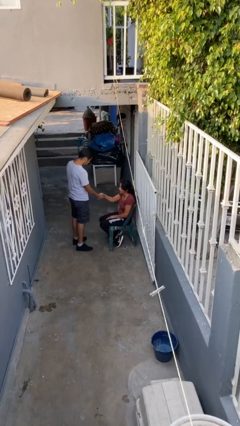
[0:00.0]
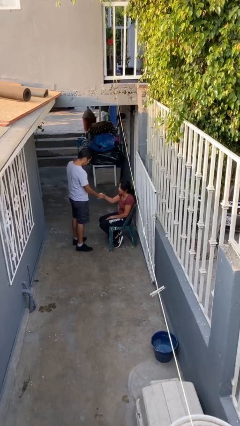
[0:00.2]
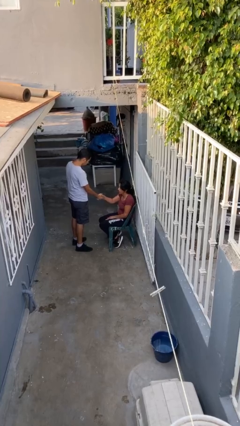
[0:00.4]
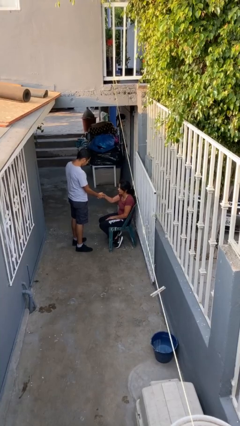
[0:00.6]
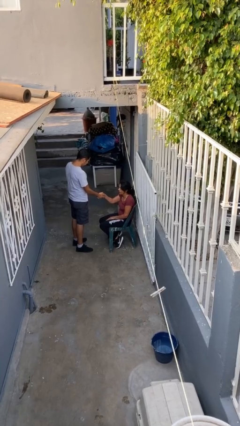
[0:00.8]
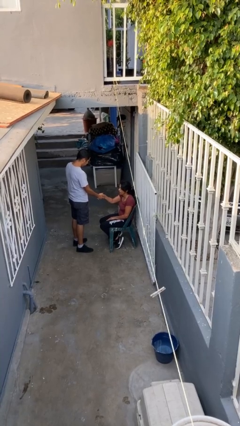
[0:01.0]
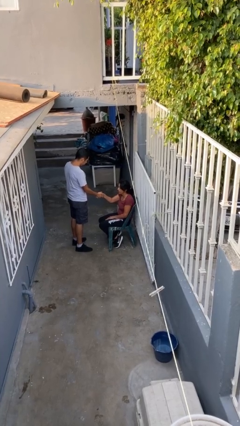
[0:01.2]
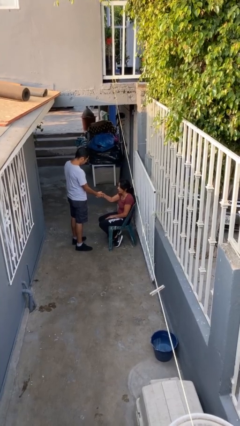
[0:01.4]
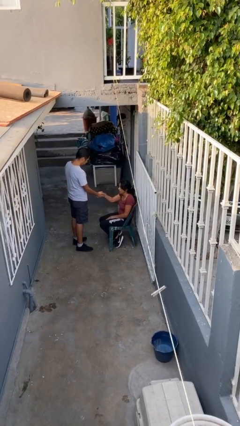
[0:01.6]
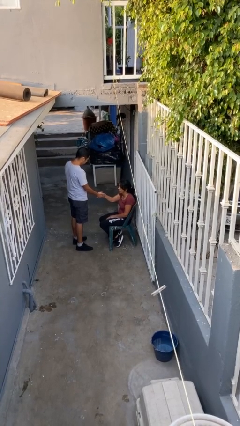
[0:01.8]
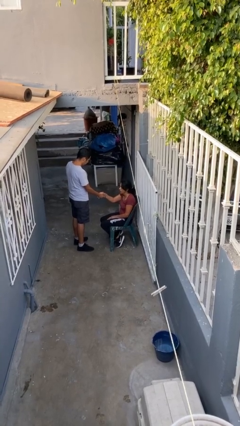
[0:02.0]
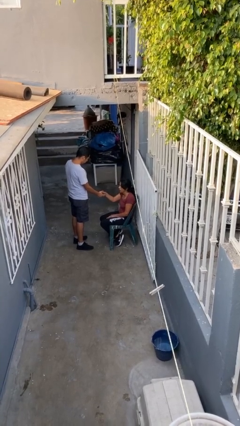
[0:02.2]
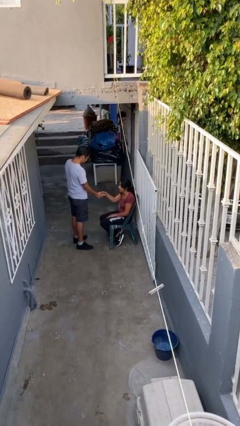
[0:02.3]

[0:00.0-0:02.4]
person shakes hand

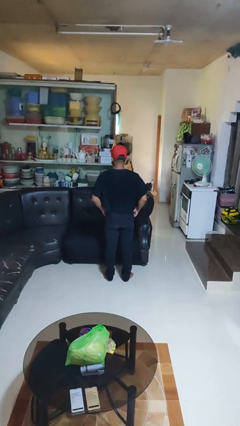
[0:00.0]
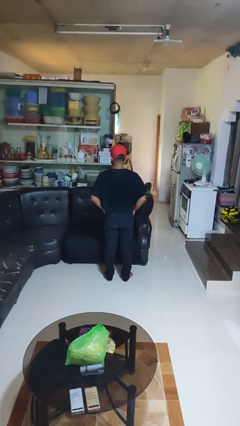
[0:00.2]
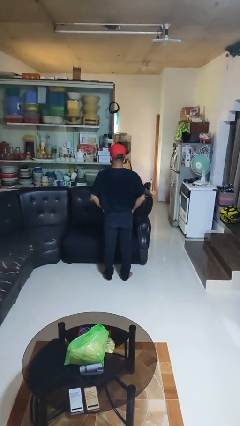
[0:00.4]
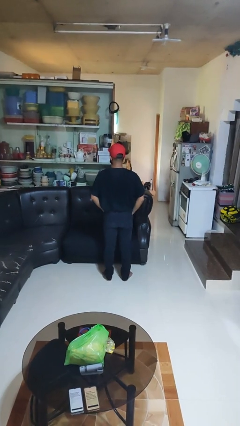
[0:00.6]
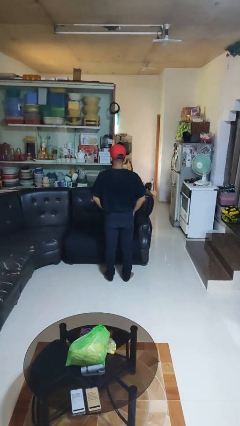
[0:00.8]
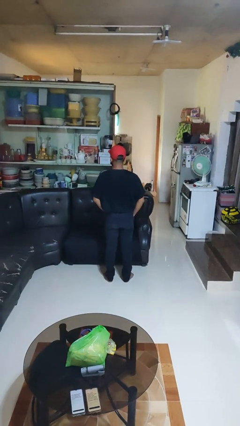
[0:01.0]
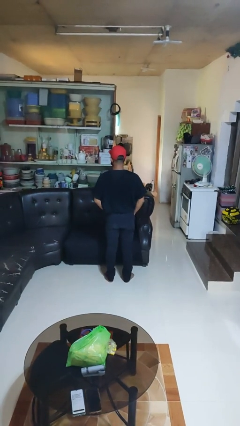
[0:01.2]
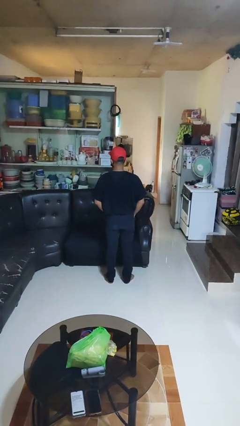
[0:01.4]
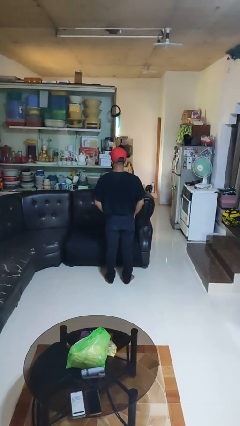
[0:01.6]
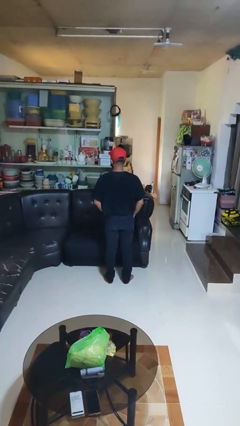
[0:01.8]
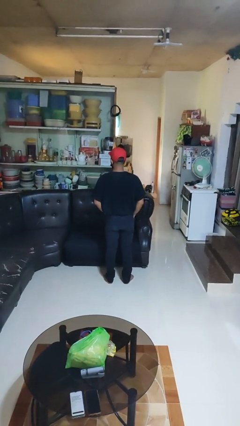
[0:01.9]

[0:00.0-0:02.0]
person puts hands in back pockets

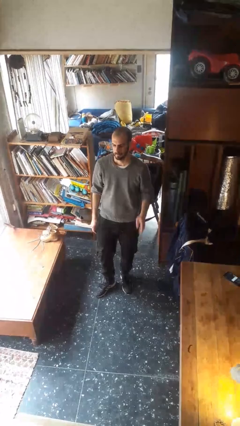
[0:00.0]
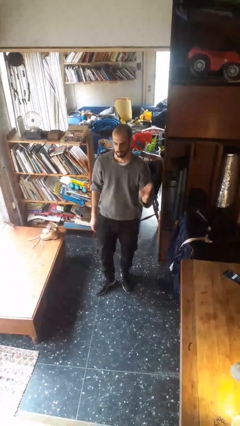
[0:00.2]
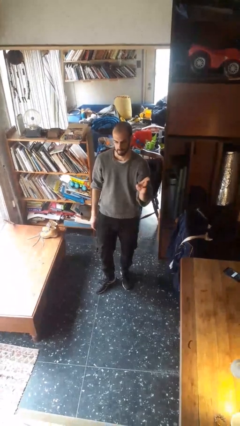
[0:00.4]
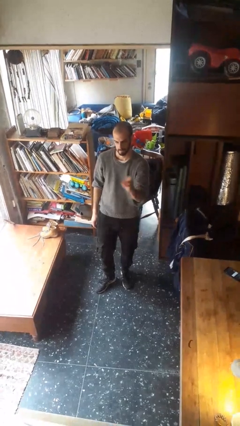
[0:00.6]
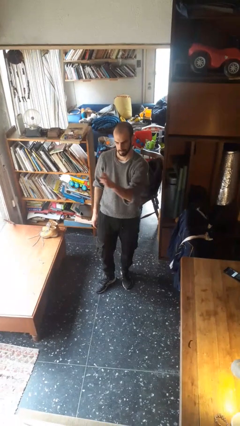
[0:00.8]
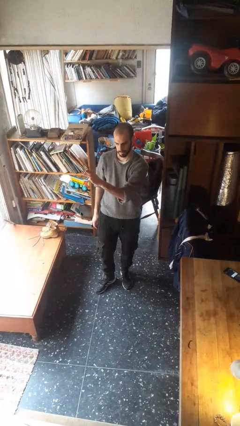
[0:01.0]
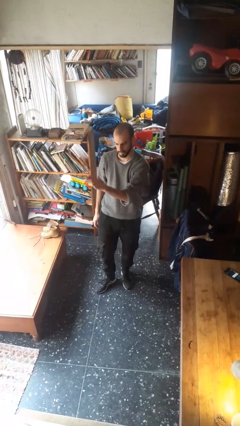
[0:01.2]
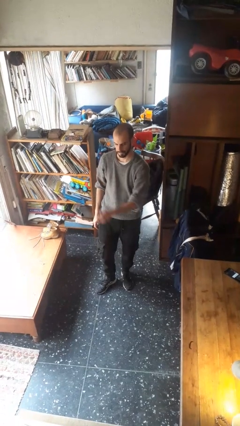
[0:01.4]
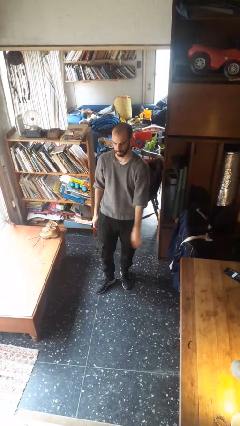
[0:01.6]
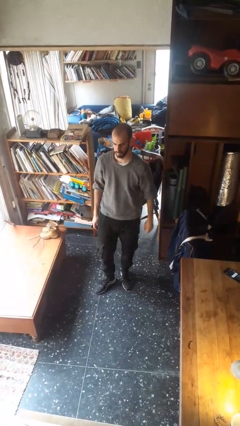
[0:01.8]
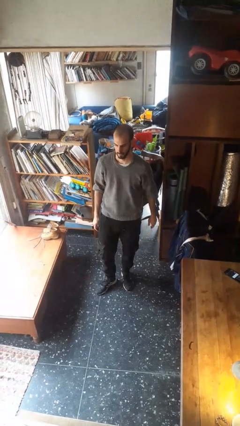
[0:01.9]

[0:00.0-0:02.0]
person gestures swipe right

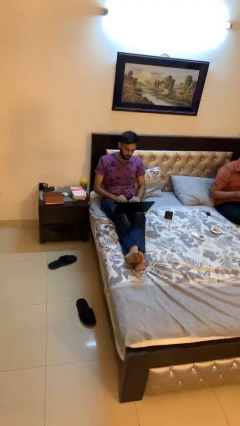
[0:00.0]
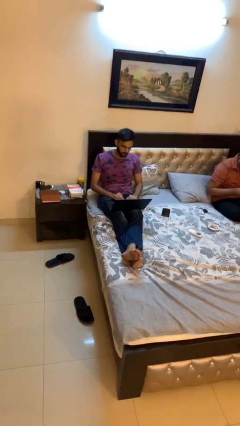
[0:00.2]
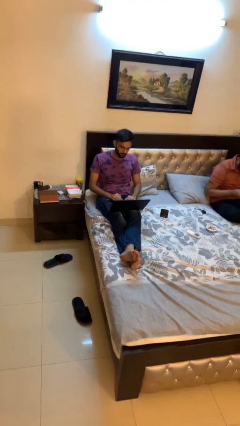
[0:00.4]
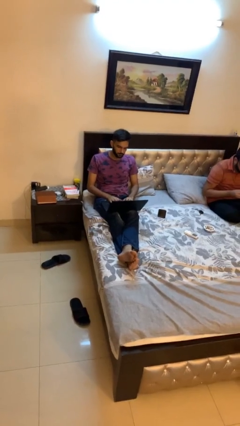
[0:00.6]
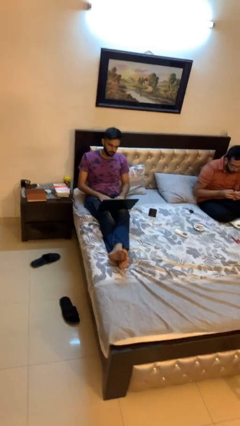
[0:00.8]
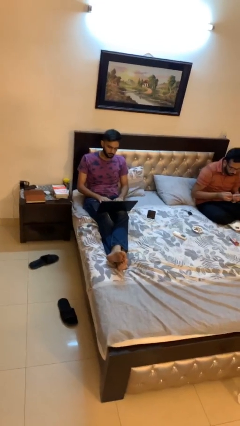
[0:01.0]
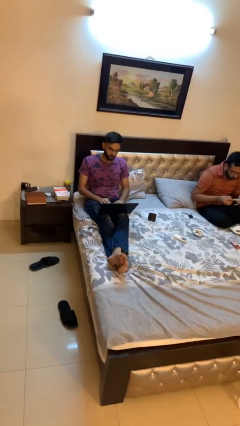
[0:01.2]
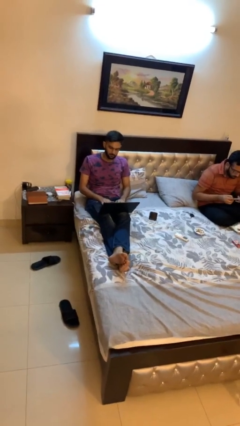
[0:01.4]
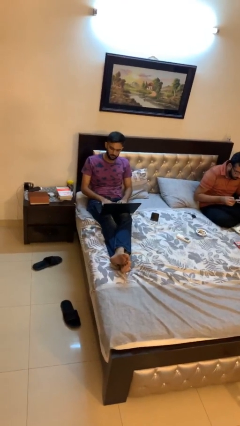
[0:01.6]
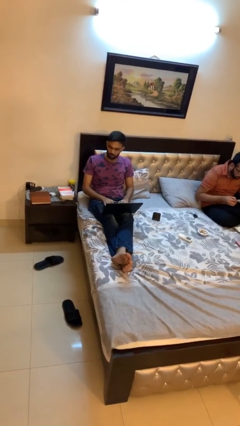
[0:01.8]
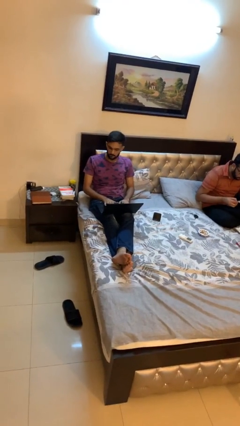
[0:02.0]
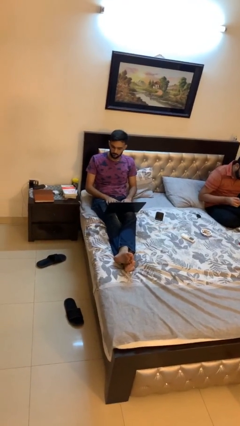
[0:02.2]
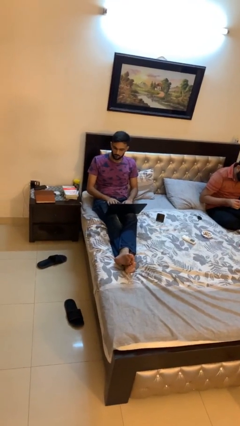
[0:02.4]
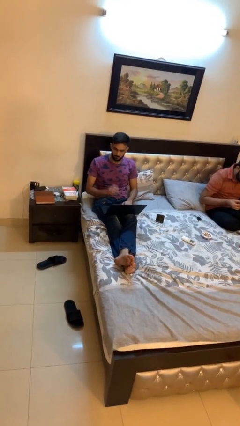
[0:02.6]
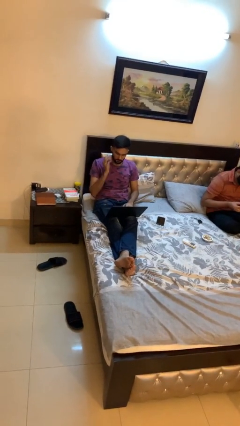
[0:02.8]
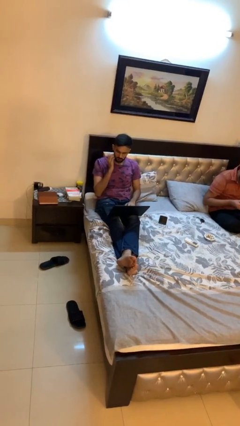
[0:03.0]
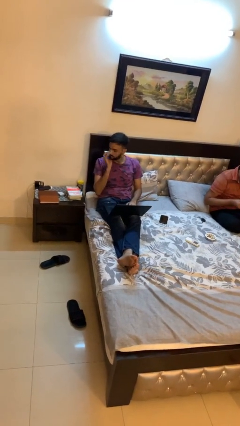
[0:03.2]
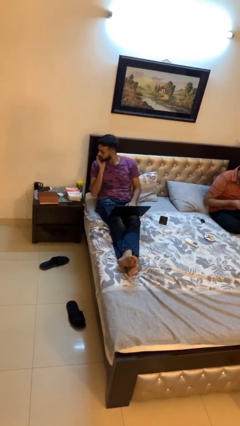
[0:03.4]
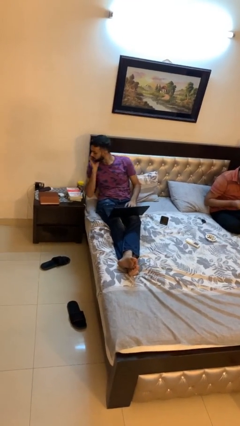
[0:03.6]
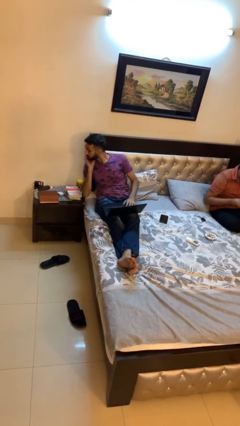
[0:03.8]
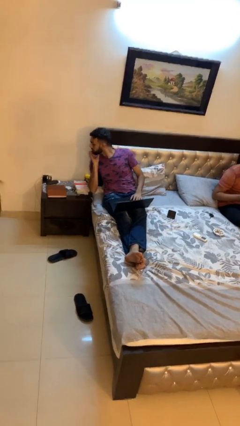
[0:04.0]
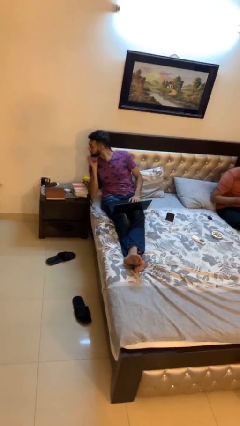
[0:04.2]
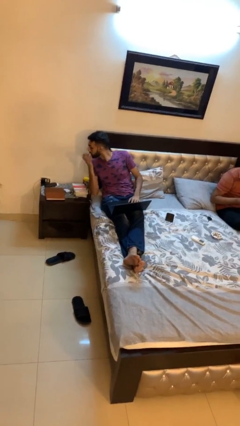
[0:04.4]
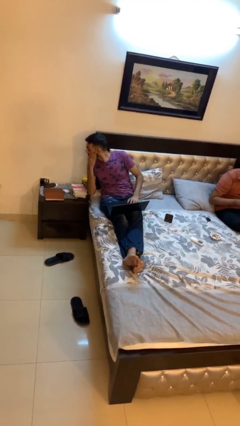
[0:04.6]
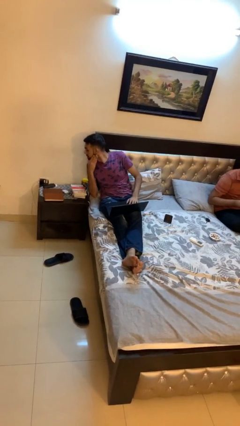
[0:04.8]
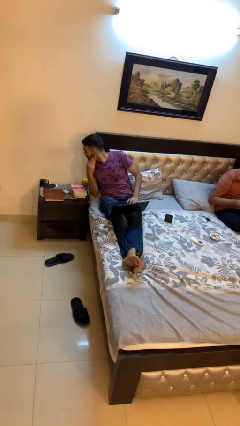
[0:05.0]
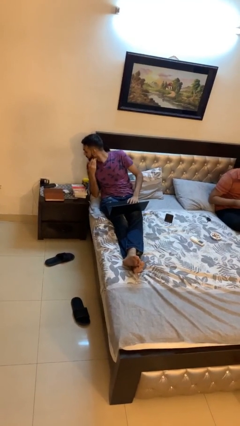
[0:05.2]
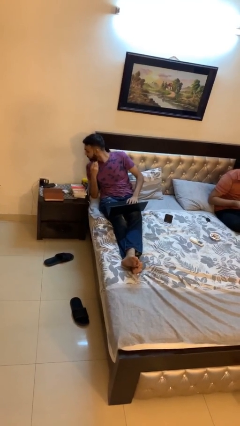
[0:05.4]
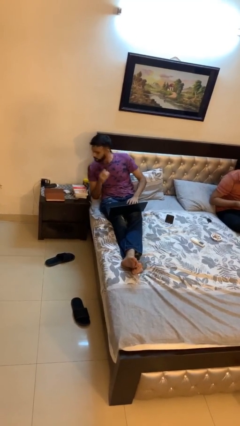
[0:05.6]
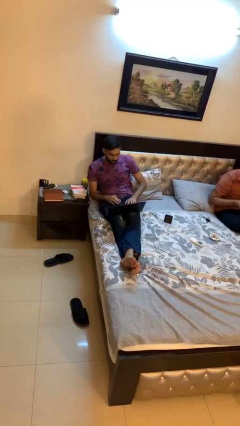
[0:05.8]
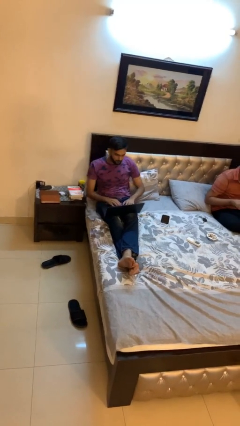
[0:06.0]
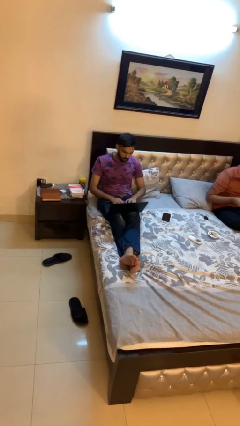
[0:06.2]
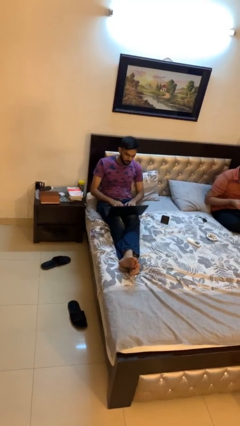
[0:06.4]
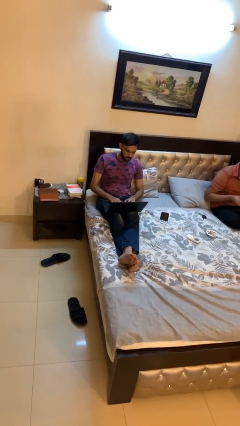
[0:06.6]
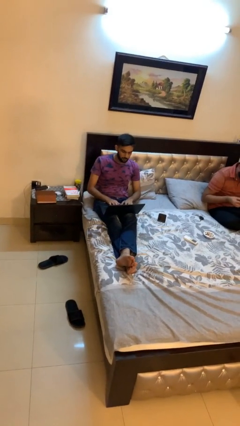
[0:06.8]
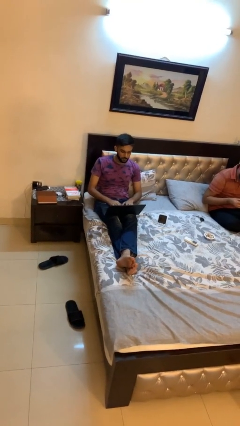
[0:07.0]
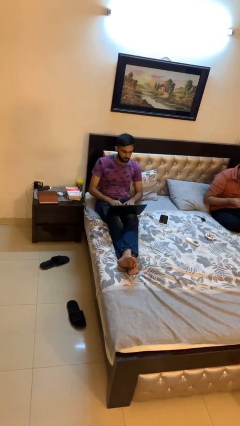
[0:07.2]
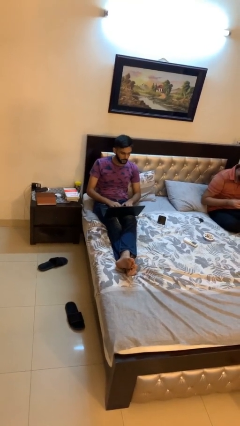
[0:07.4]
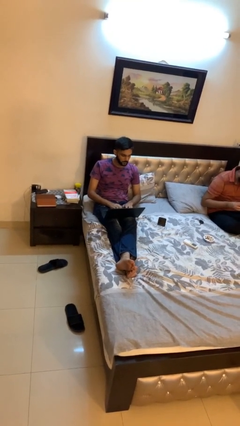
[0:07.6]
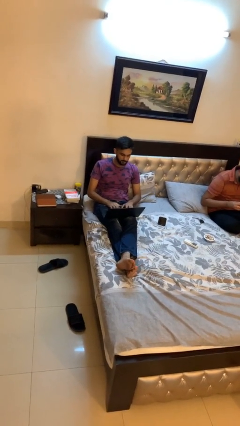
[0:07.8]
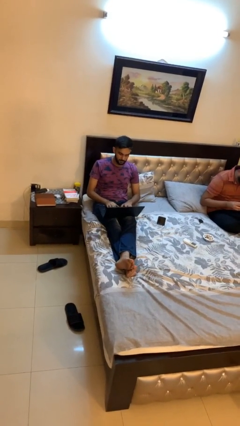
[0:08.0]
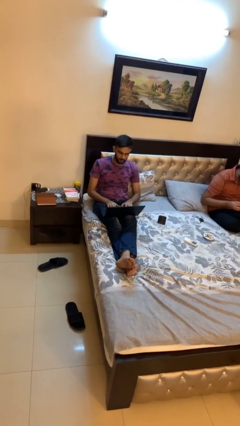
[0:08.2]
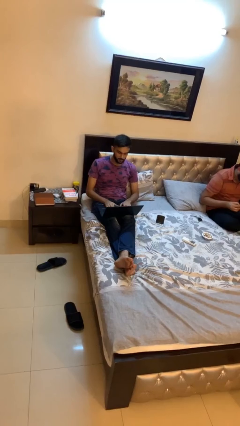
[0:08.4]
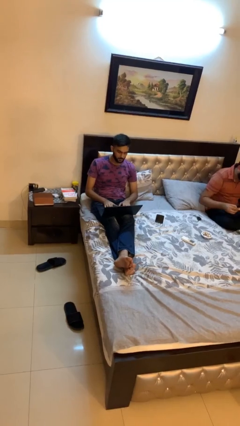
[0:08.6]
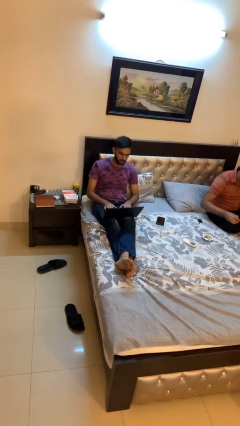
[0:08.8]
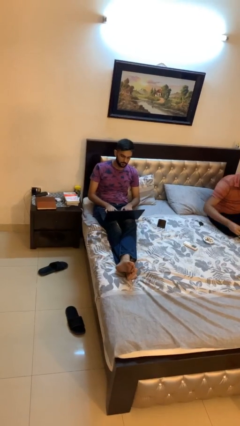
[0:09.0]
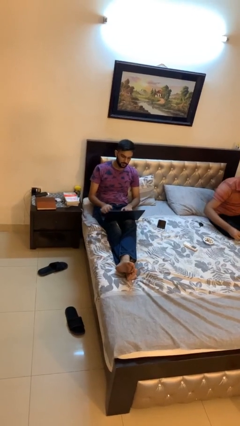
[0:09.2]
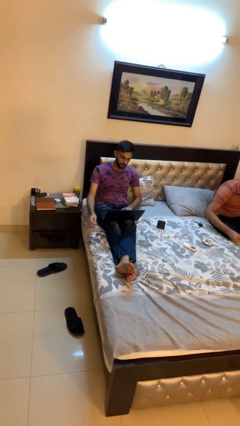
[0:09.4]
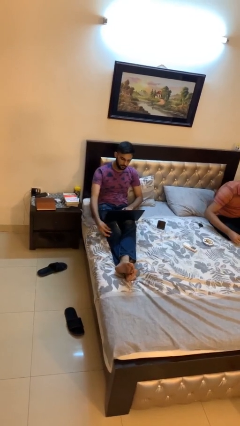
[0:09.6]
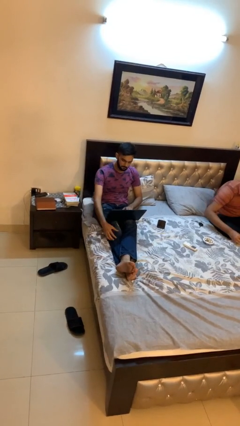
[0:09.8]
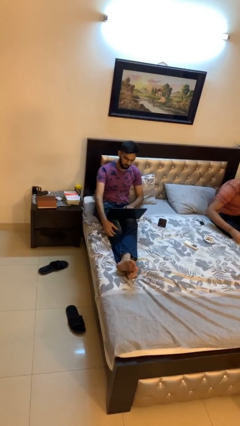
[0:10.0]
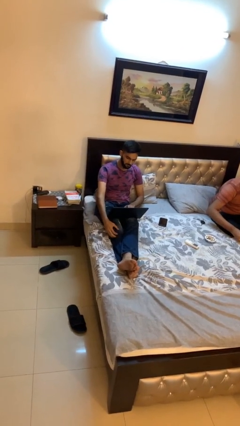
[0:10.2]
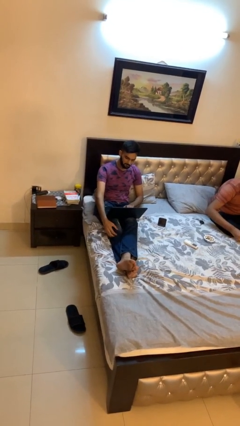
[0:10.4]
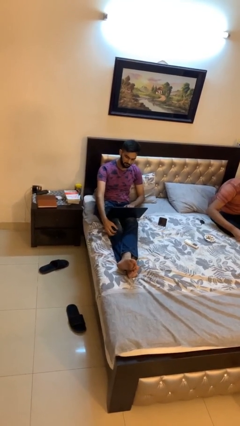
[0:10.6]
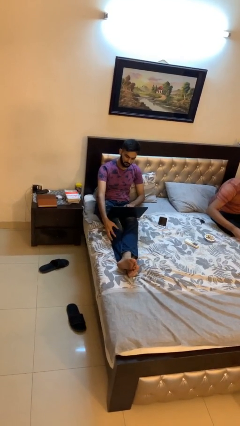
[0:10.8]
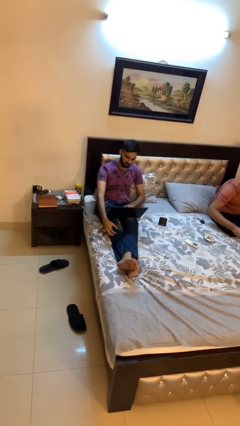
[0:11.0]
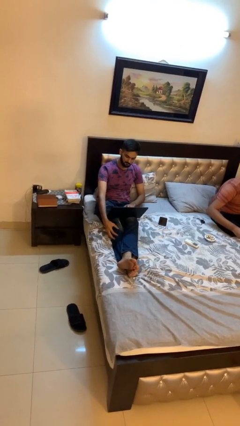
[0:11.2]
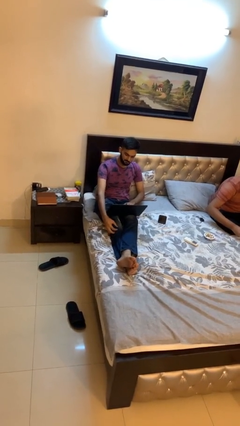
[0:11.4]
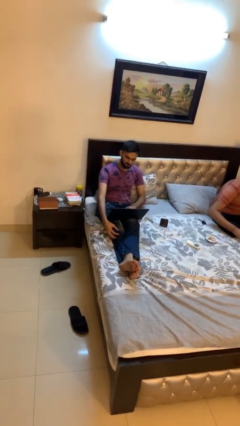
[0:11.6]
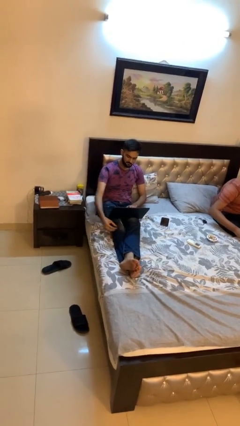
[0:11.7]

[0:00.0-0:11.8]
person interacts with laptop
